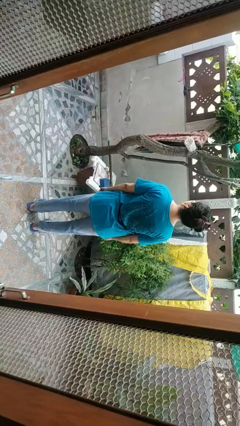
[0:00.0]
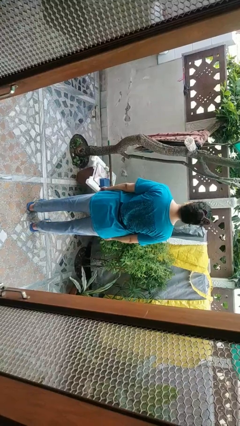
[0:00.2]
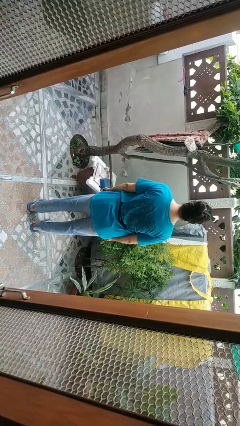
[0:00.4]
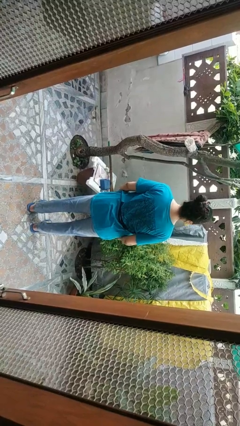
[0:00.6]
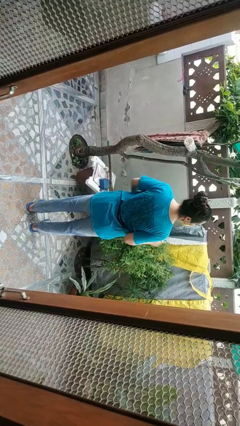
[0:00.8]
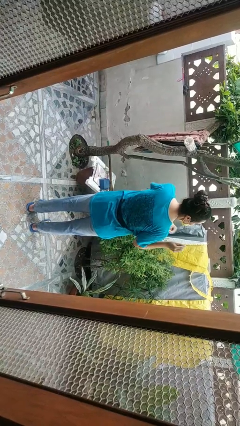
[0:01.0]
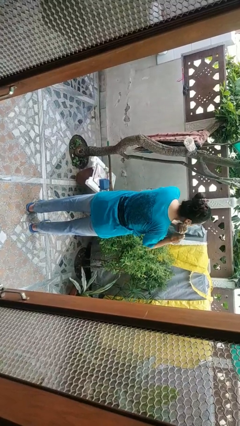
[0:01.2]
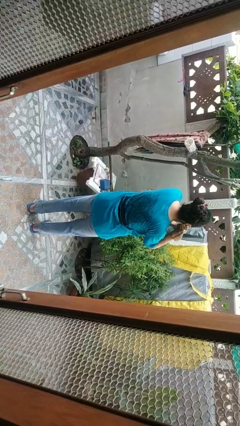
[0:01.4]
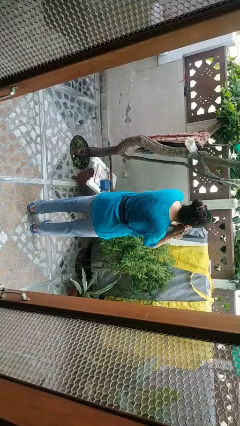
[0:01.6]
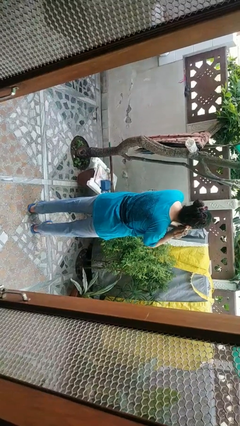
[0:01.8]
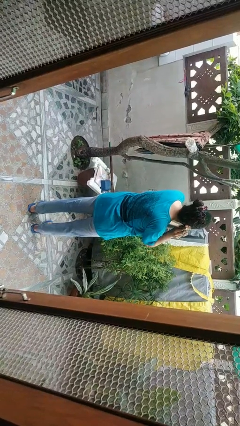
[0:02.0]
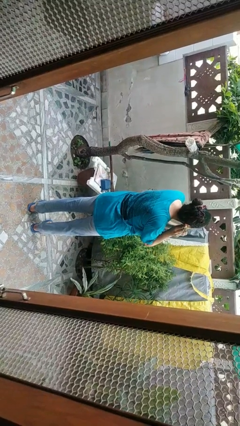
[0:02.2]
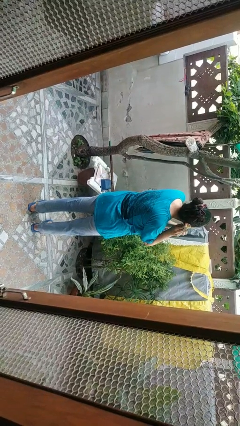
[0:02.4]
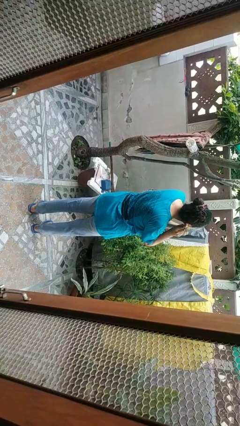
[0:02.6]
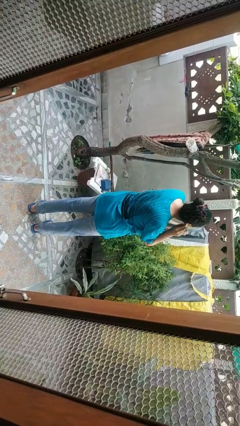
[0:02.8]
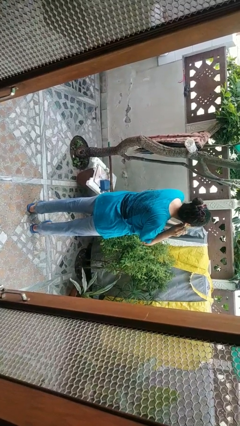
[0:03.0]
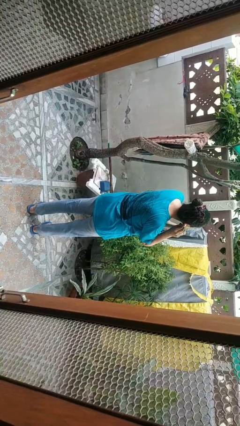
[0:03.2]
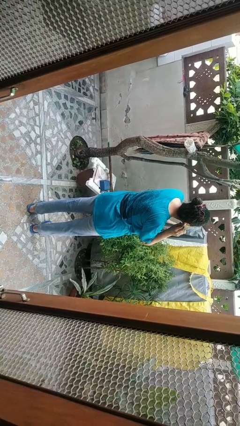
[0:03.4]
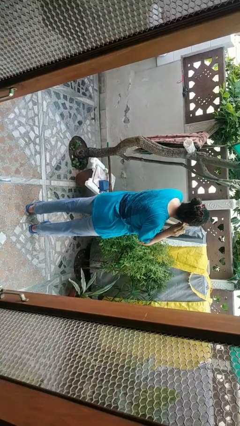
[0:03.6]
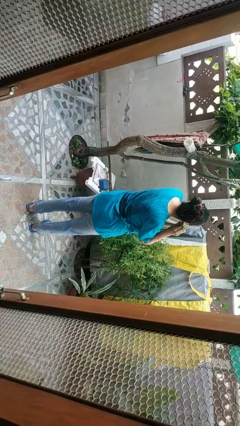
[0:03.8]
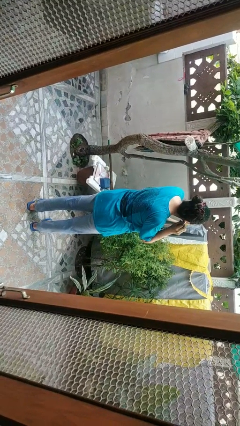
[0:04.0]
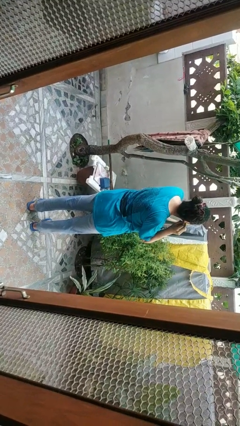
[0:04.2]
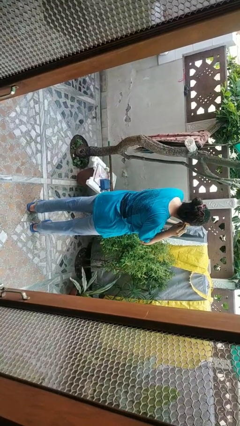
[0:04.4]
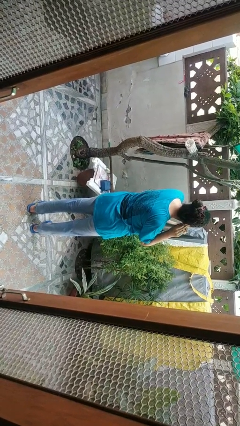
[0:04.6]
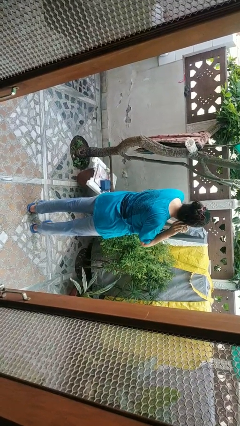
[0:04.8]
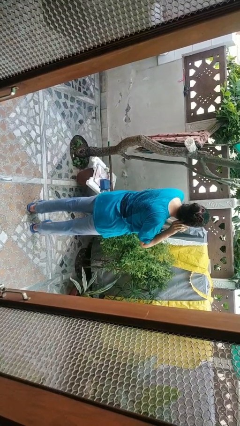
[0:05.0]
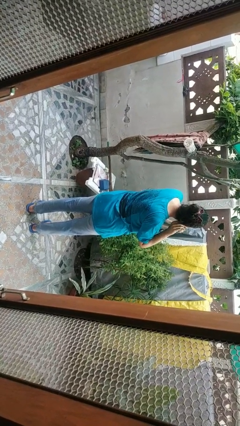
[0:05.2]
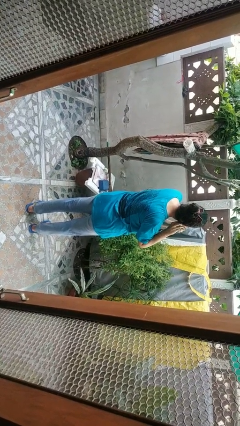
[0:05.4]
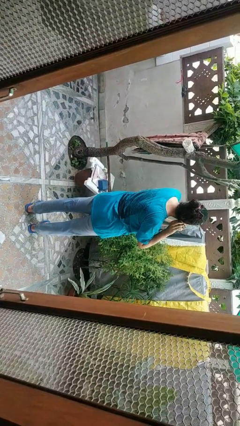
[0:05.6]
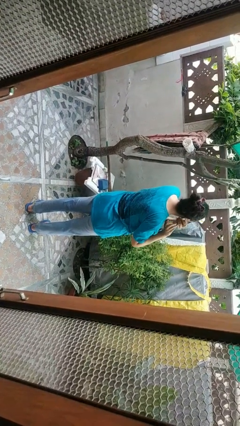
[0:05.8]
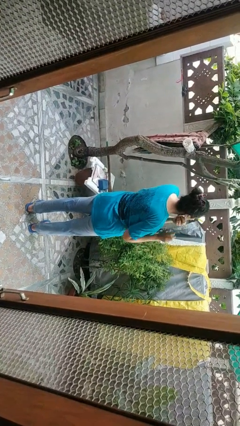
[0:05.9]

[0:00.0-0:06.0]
person puts on earrings

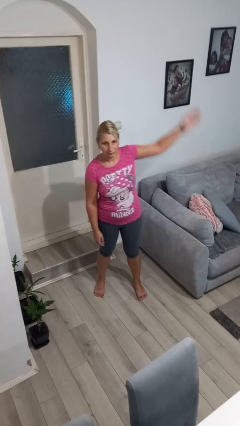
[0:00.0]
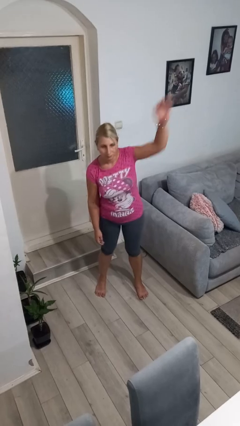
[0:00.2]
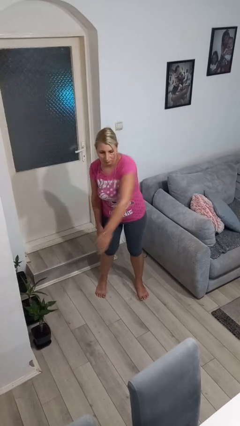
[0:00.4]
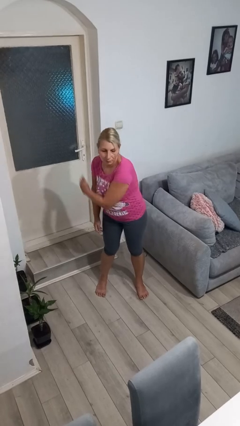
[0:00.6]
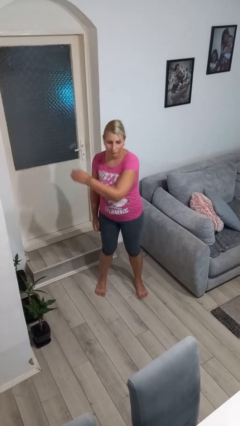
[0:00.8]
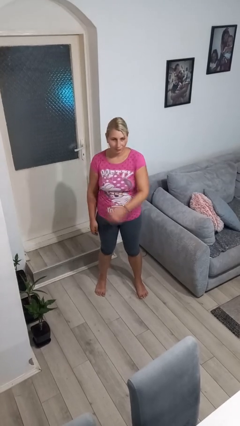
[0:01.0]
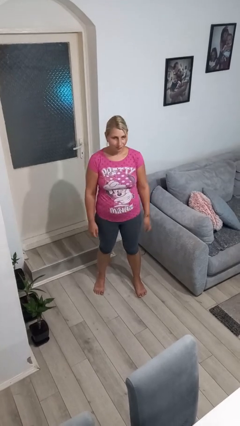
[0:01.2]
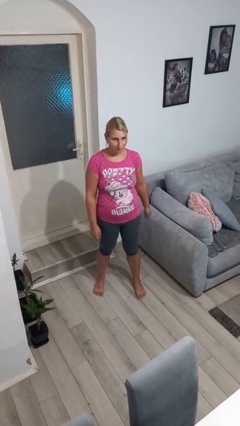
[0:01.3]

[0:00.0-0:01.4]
person punches

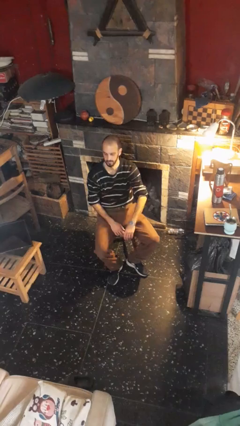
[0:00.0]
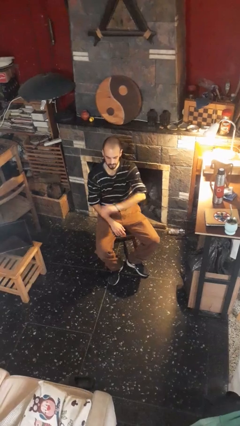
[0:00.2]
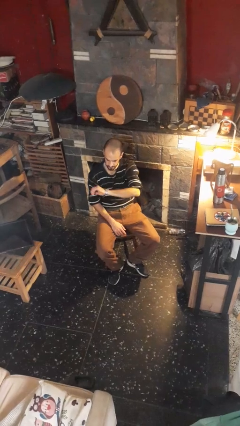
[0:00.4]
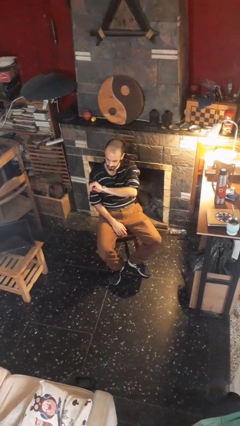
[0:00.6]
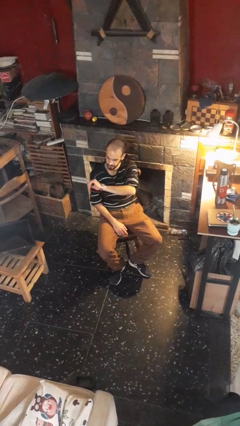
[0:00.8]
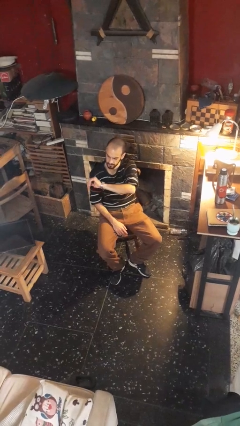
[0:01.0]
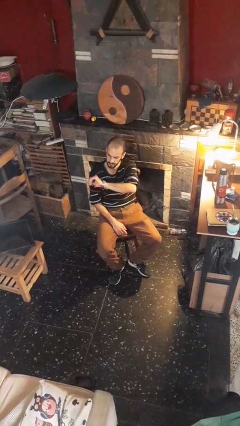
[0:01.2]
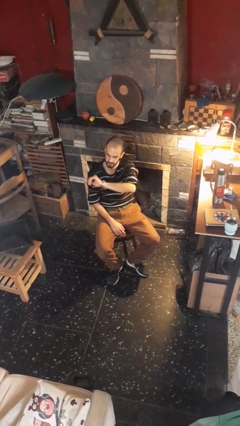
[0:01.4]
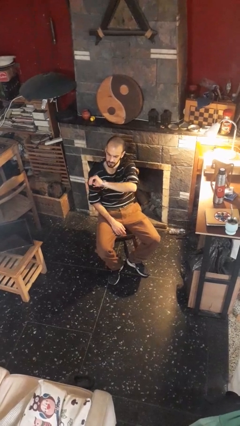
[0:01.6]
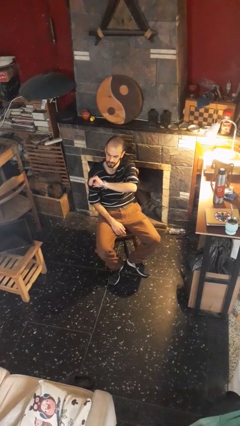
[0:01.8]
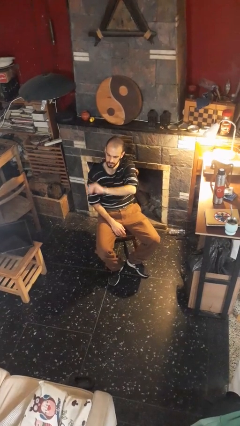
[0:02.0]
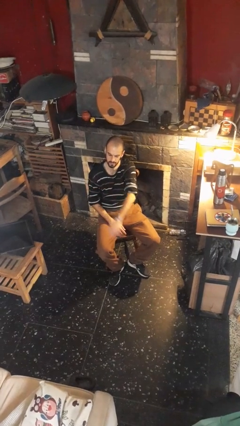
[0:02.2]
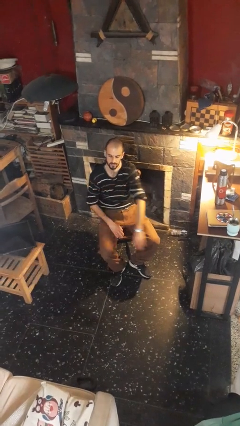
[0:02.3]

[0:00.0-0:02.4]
person looks at wristwatch

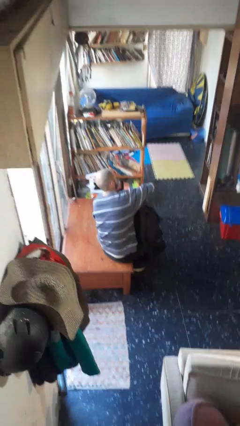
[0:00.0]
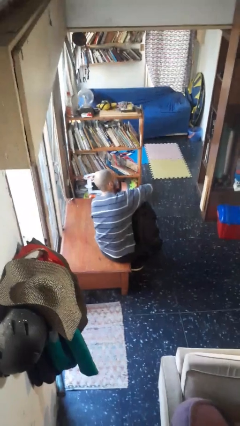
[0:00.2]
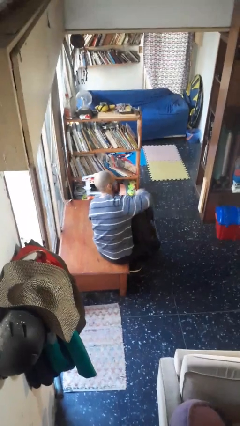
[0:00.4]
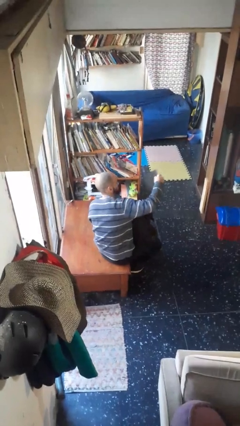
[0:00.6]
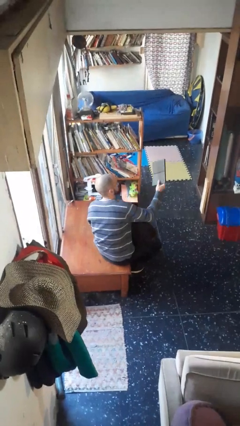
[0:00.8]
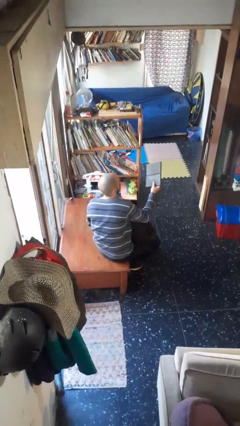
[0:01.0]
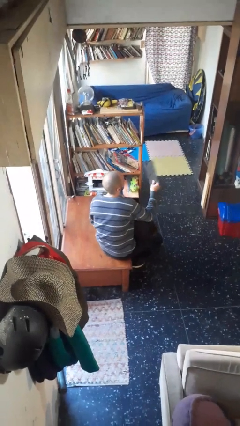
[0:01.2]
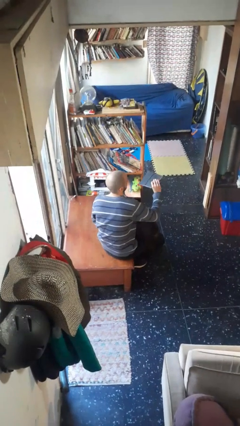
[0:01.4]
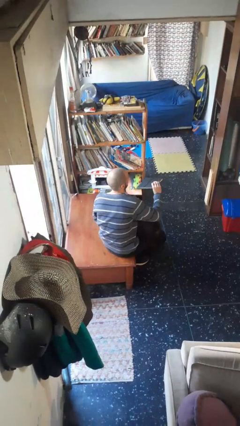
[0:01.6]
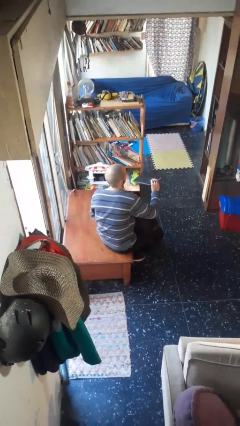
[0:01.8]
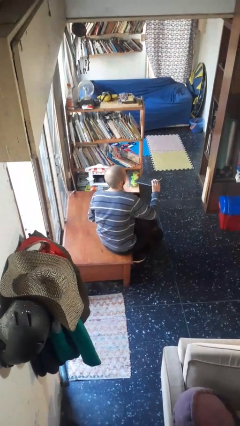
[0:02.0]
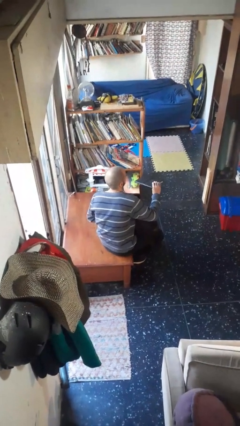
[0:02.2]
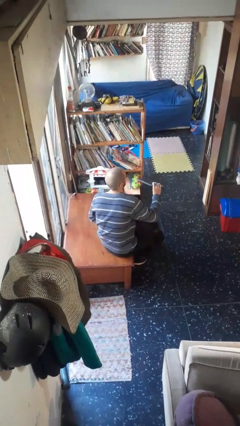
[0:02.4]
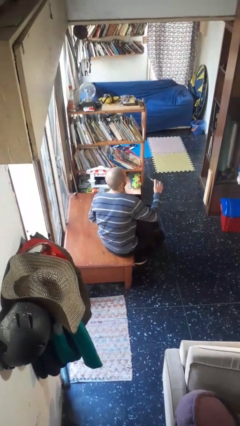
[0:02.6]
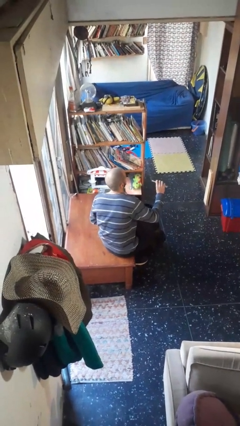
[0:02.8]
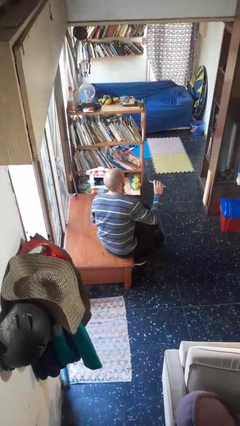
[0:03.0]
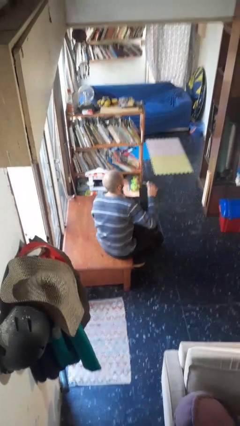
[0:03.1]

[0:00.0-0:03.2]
person takes object from backpack

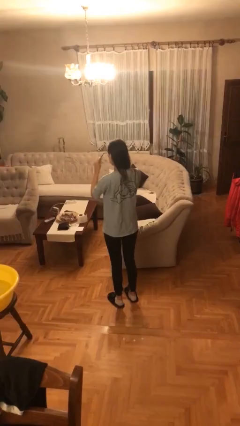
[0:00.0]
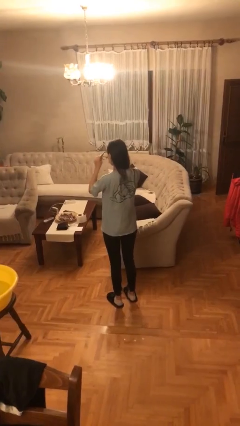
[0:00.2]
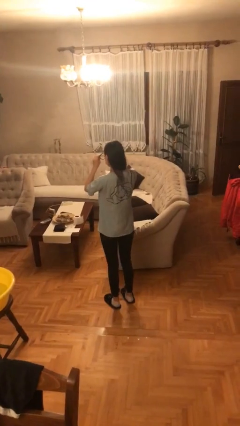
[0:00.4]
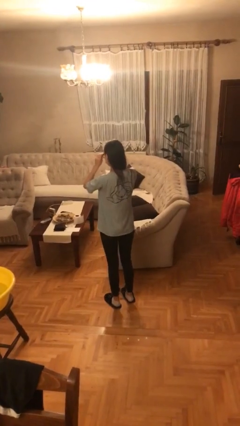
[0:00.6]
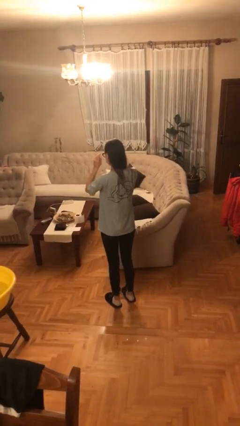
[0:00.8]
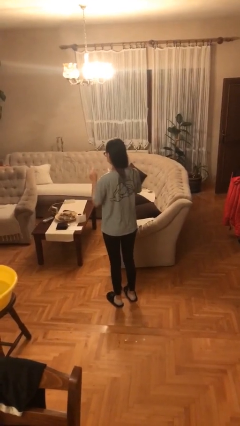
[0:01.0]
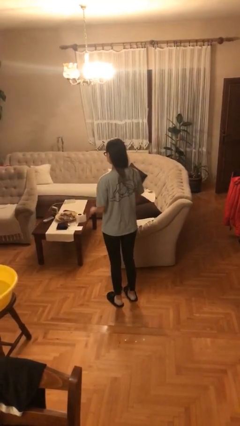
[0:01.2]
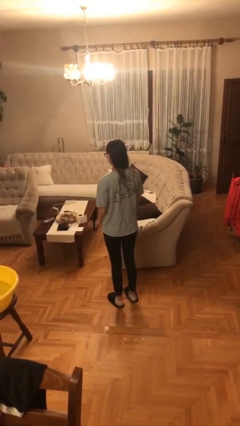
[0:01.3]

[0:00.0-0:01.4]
person puts on glasses

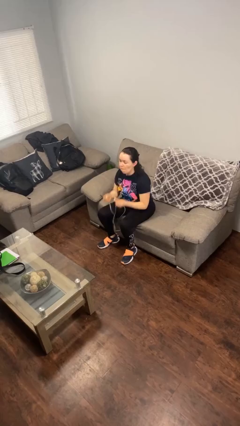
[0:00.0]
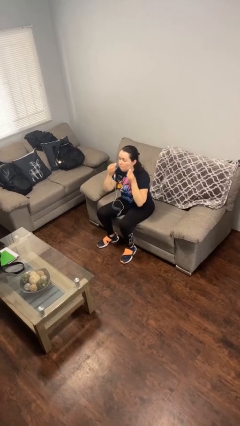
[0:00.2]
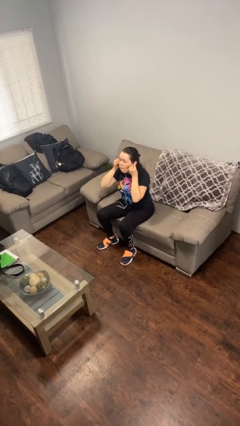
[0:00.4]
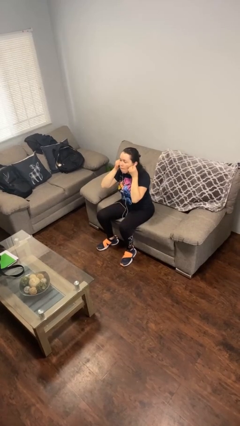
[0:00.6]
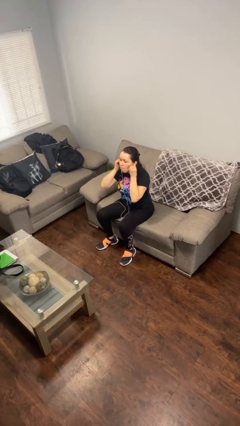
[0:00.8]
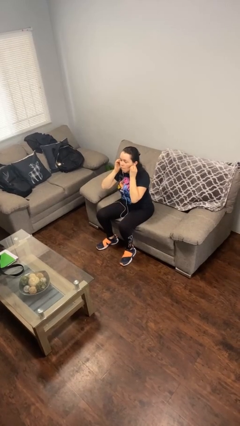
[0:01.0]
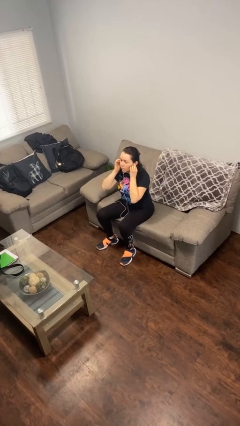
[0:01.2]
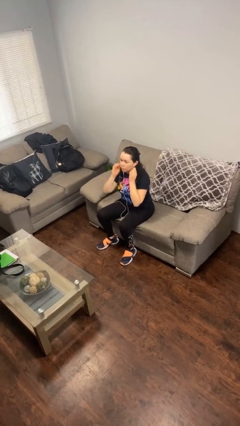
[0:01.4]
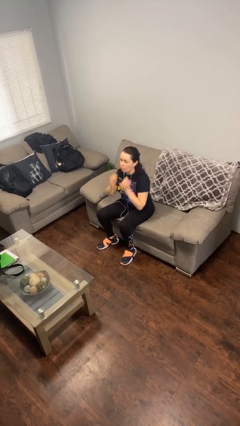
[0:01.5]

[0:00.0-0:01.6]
person puts on headphones

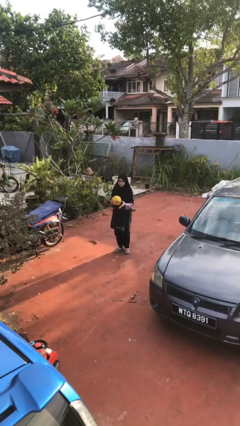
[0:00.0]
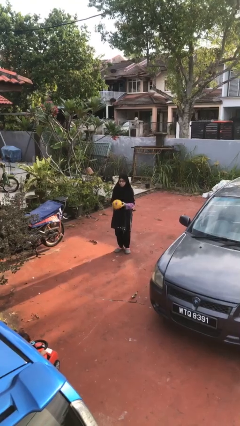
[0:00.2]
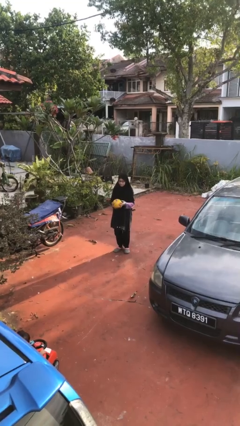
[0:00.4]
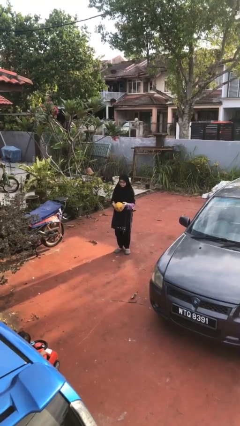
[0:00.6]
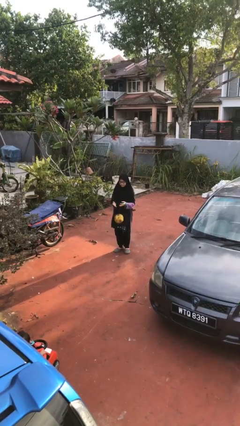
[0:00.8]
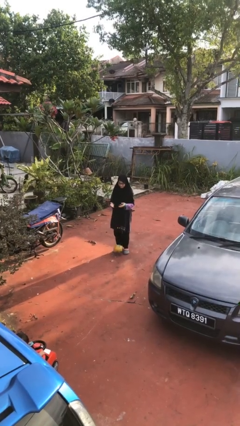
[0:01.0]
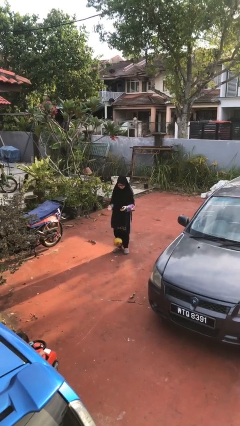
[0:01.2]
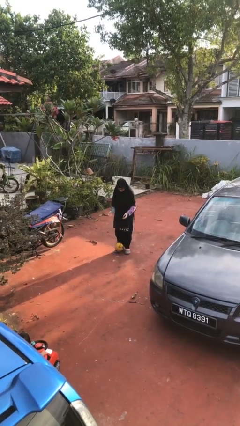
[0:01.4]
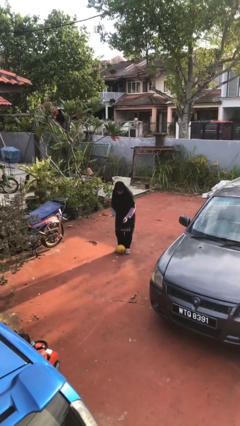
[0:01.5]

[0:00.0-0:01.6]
person drops object
